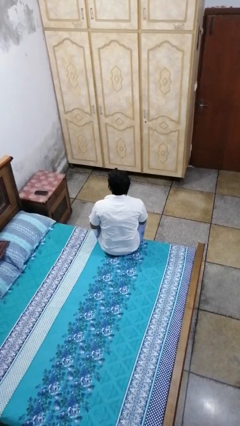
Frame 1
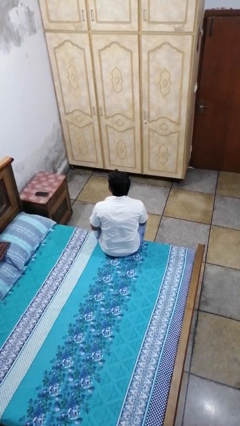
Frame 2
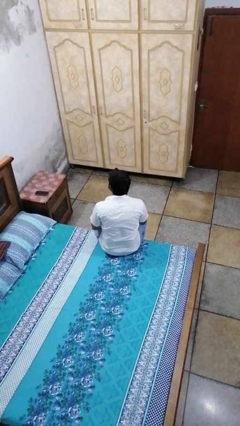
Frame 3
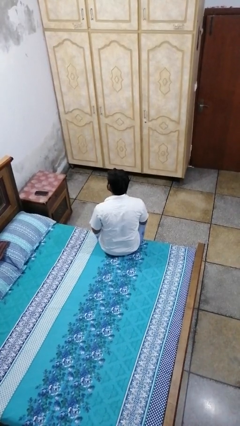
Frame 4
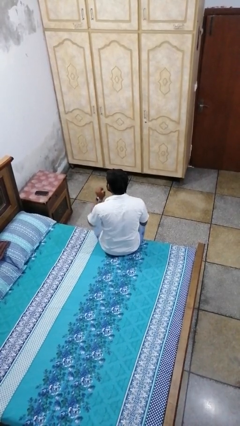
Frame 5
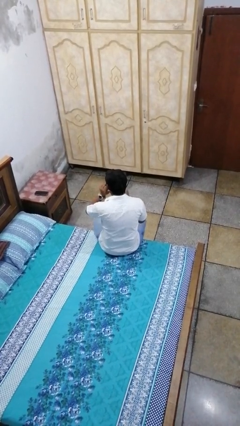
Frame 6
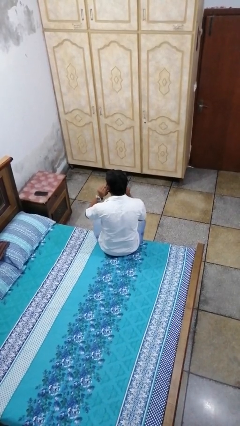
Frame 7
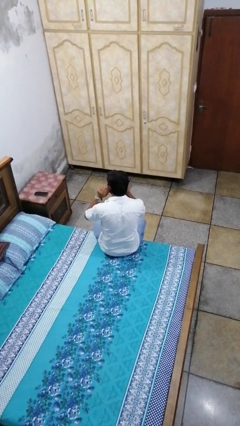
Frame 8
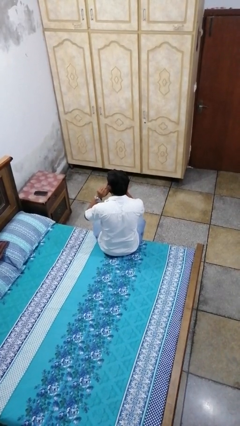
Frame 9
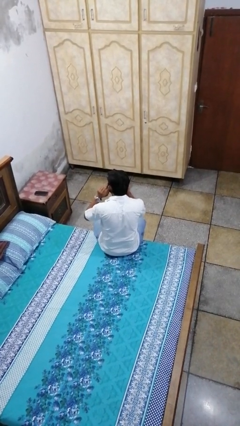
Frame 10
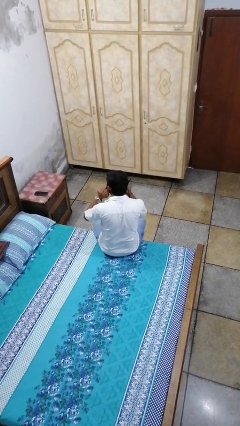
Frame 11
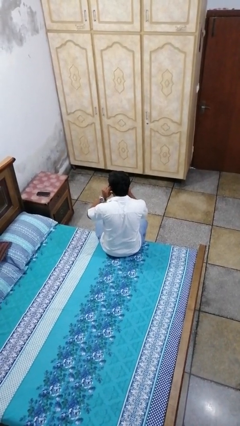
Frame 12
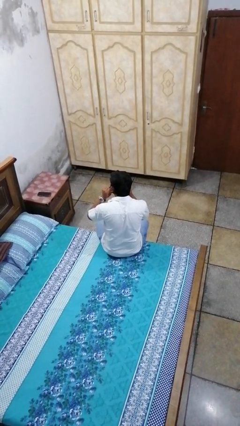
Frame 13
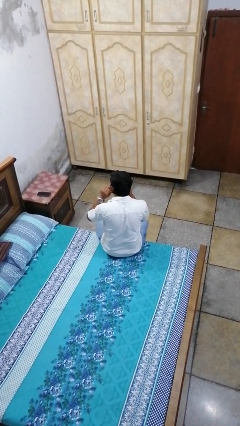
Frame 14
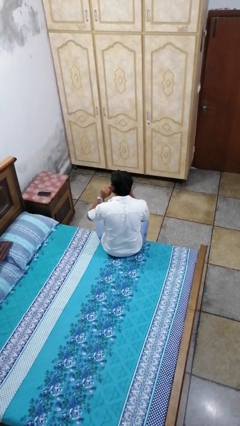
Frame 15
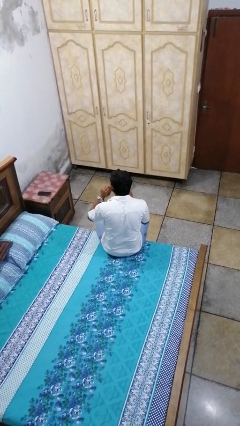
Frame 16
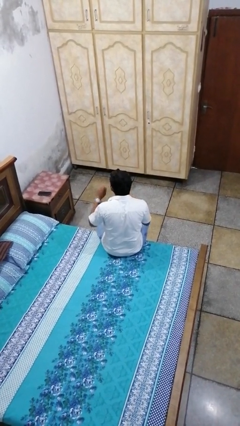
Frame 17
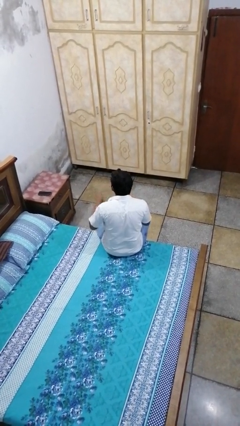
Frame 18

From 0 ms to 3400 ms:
person touches earlobe

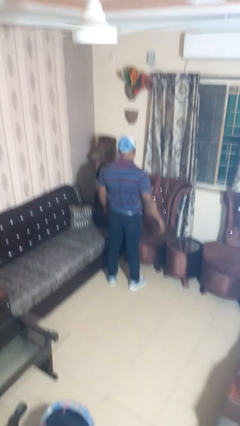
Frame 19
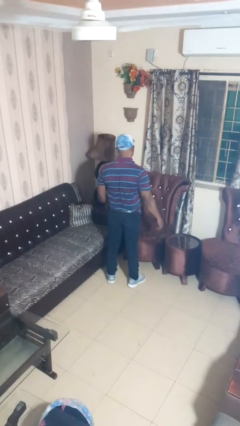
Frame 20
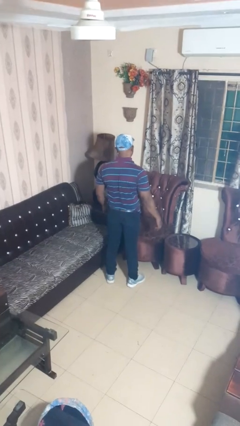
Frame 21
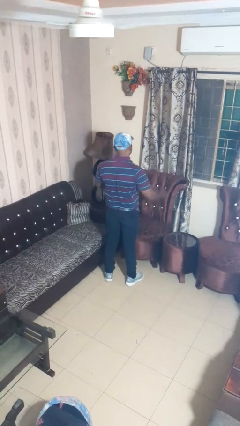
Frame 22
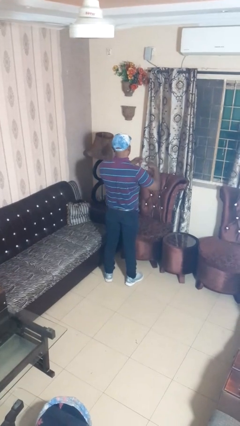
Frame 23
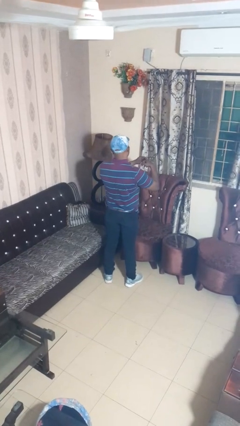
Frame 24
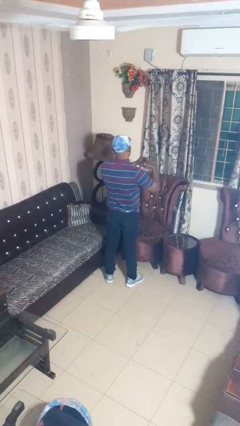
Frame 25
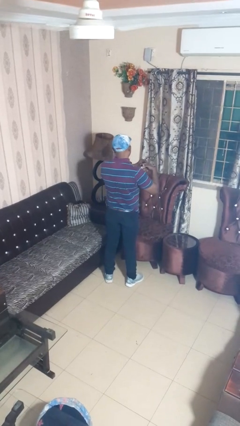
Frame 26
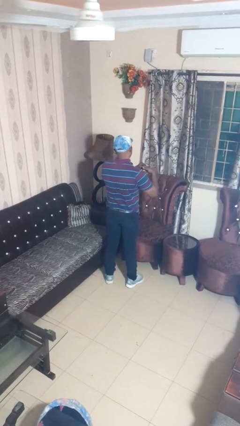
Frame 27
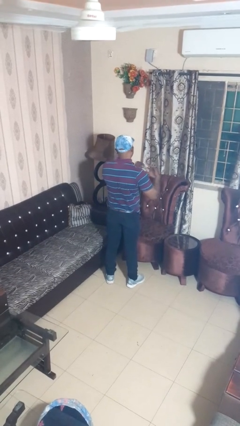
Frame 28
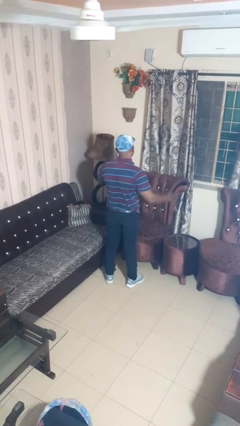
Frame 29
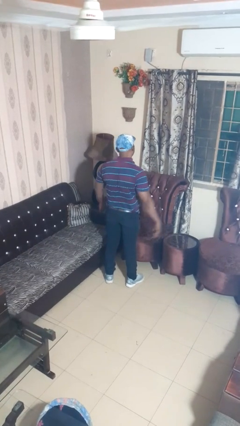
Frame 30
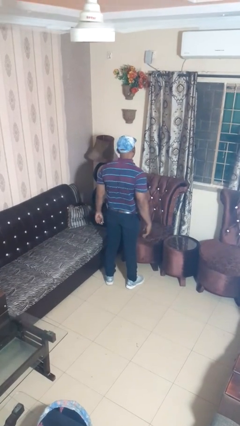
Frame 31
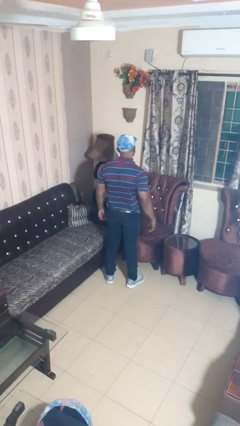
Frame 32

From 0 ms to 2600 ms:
person takes off ring

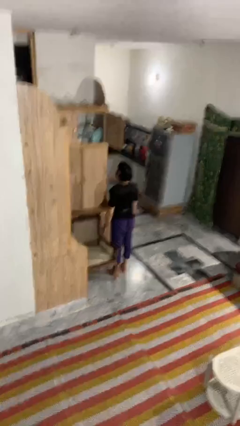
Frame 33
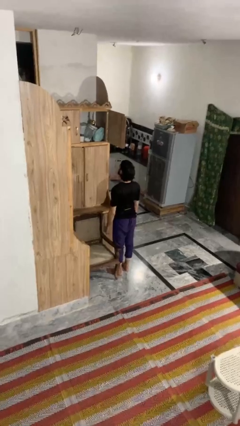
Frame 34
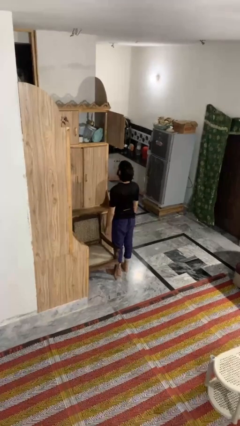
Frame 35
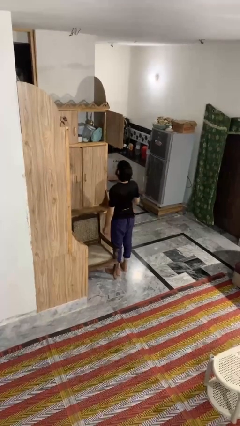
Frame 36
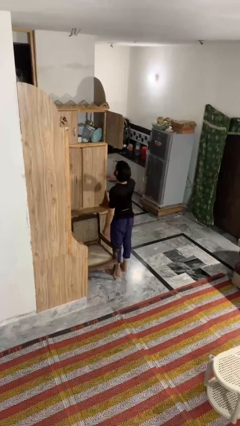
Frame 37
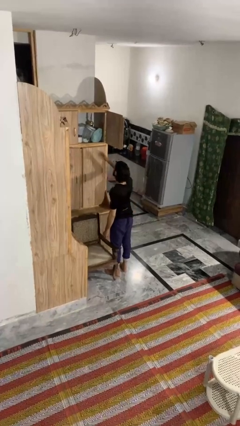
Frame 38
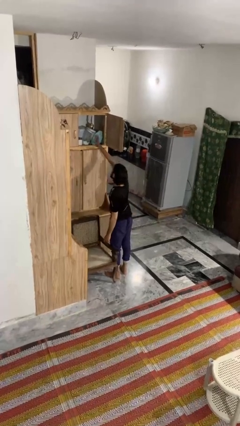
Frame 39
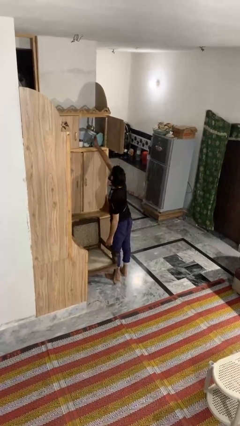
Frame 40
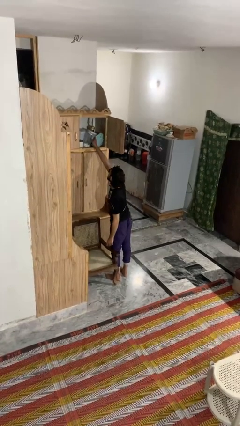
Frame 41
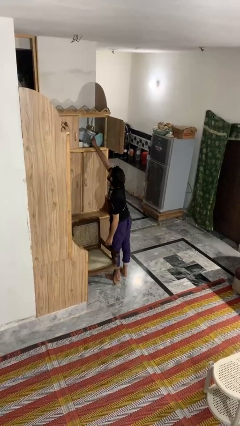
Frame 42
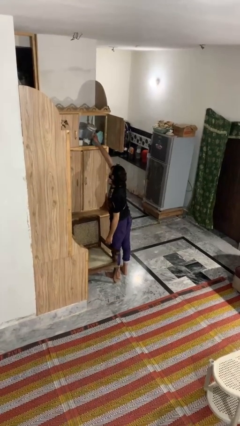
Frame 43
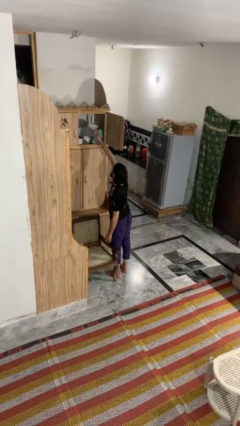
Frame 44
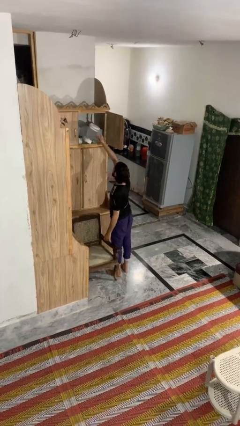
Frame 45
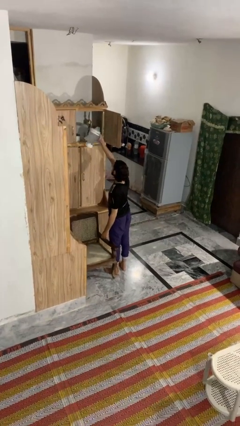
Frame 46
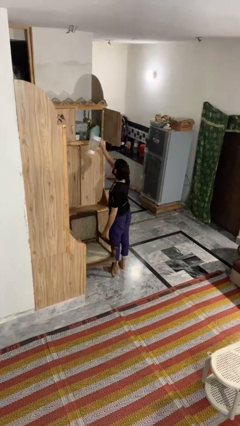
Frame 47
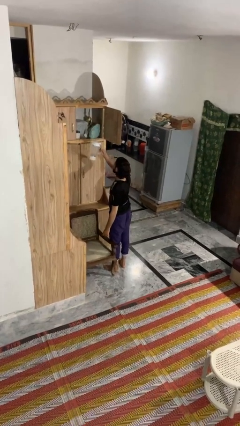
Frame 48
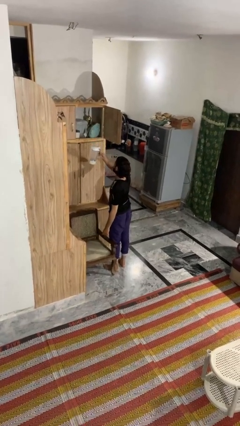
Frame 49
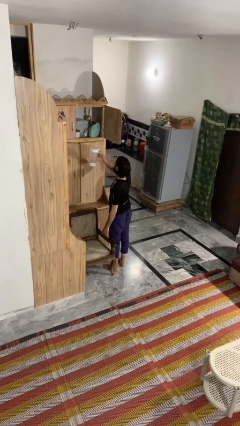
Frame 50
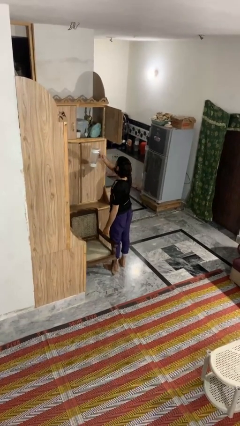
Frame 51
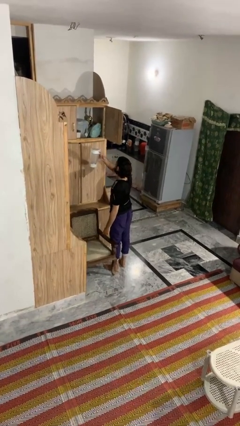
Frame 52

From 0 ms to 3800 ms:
person picks up object from shelf

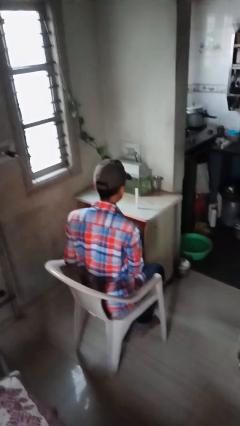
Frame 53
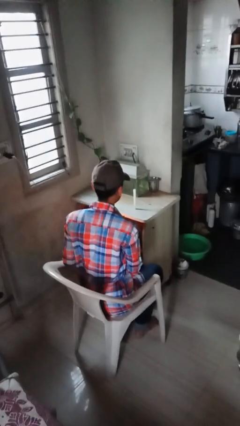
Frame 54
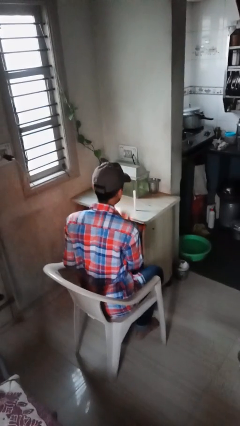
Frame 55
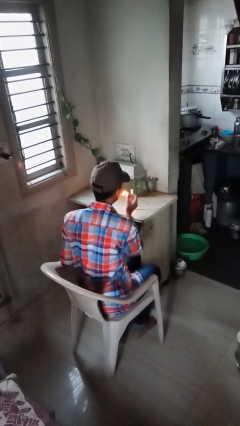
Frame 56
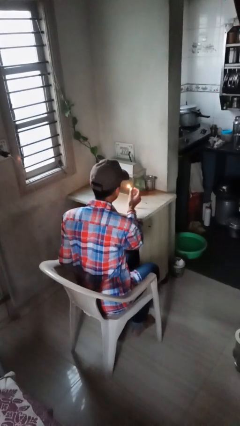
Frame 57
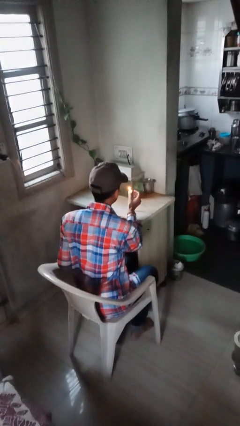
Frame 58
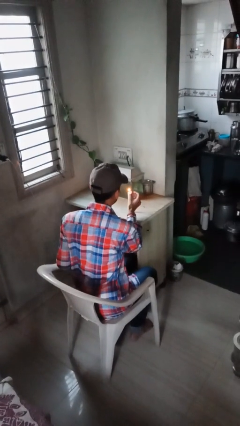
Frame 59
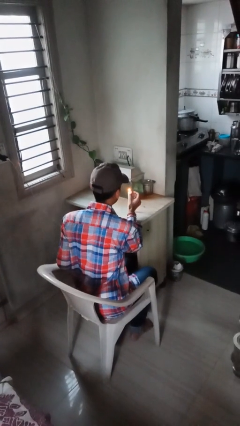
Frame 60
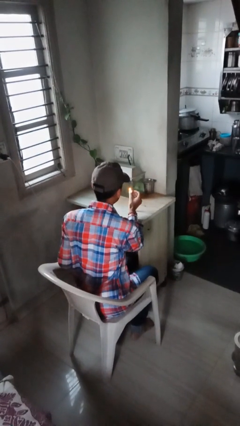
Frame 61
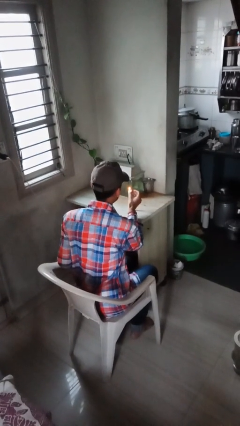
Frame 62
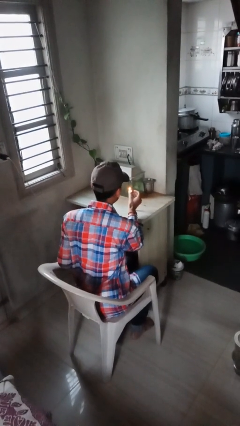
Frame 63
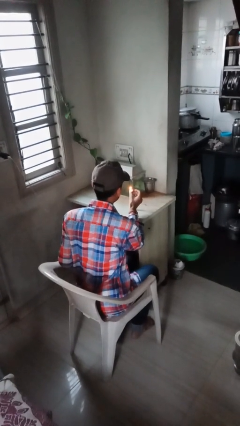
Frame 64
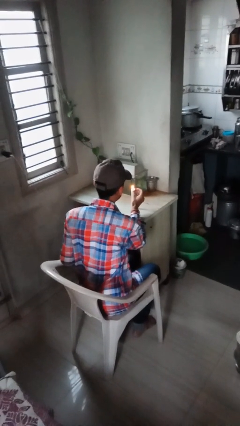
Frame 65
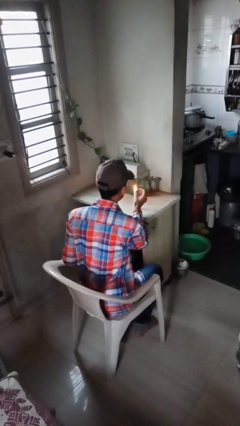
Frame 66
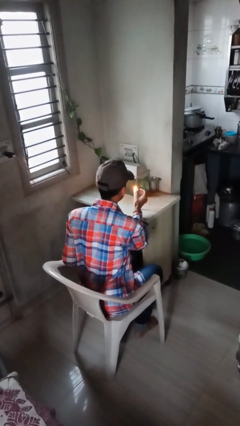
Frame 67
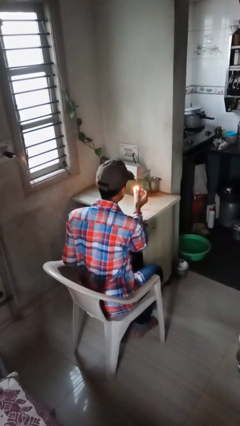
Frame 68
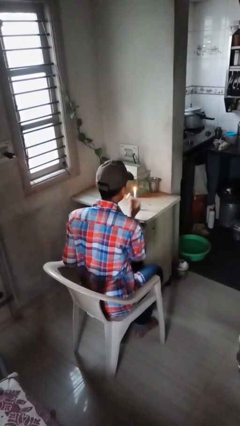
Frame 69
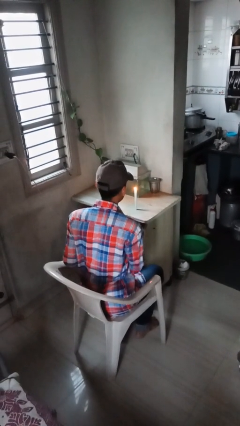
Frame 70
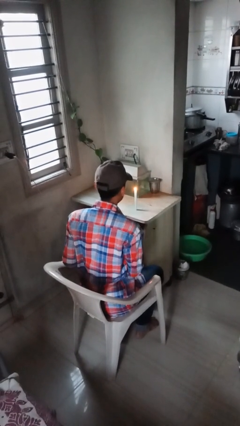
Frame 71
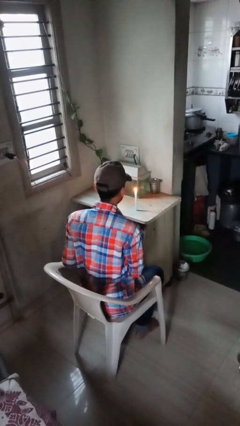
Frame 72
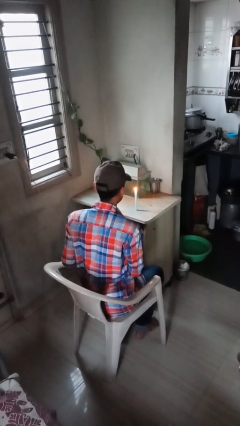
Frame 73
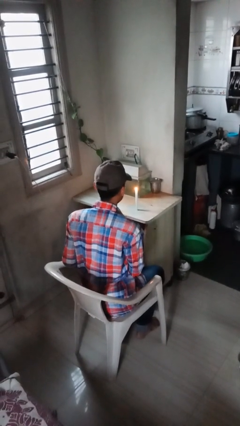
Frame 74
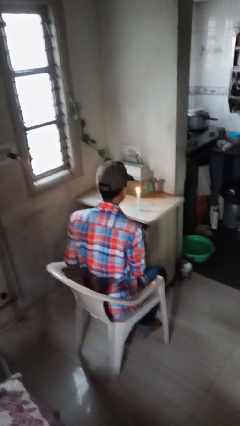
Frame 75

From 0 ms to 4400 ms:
person lights candle

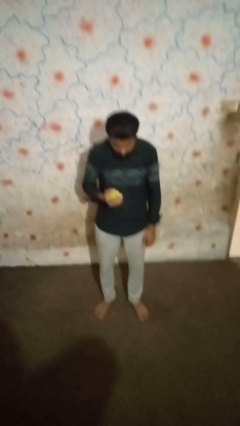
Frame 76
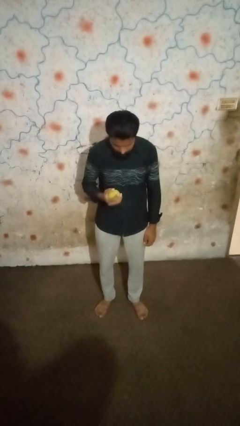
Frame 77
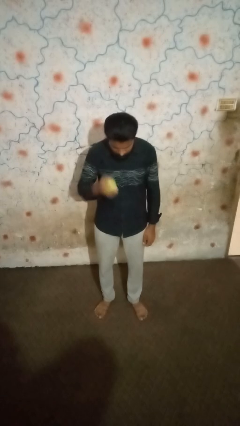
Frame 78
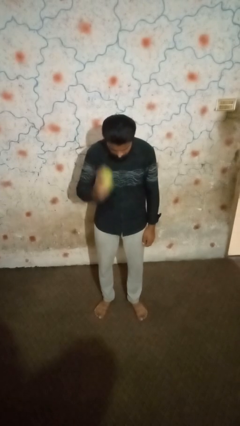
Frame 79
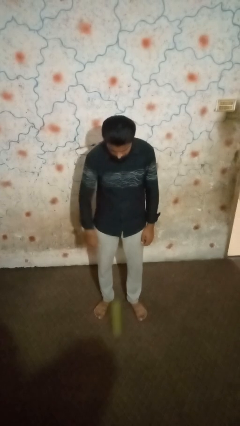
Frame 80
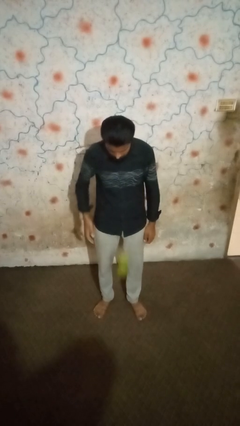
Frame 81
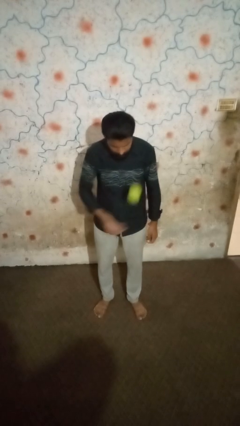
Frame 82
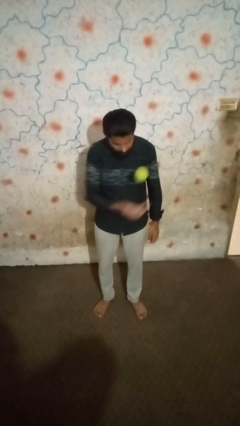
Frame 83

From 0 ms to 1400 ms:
person bounces ball on floor

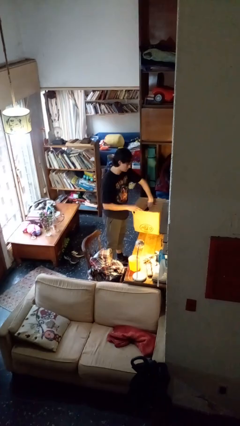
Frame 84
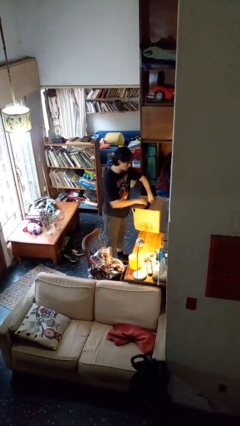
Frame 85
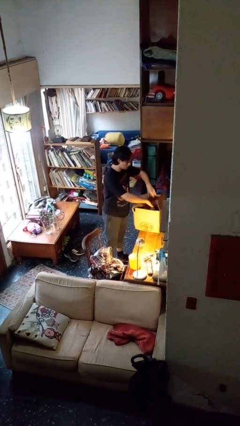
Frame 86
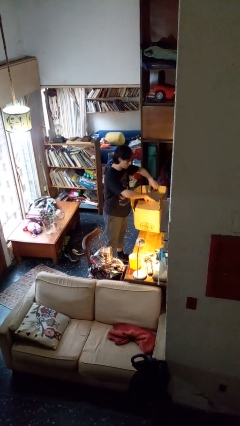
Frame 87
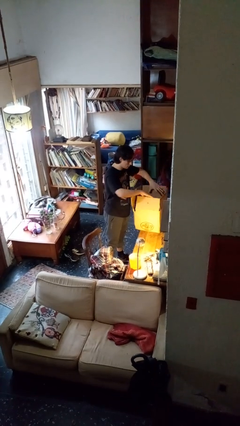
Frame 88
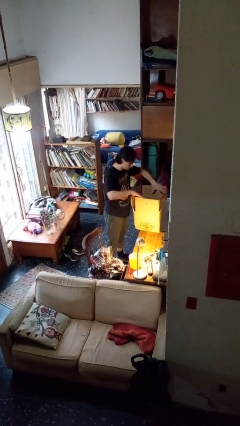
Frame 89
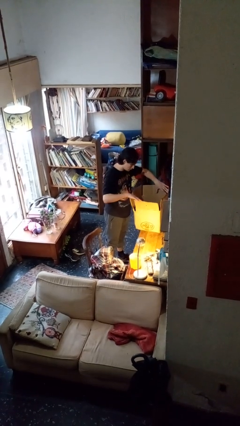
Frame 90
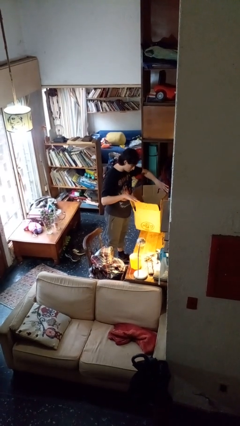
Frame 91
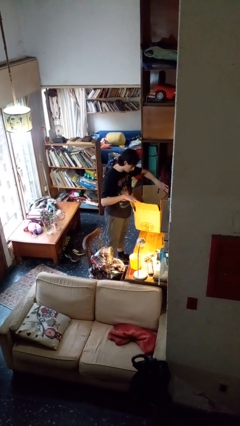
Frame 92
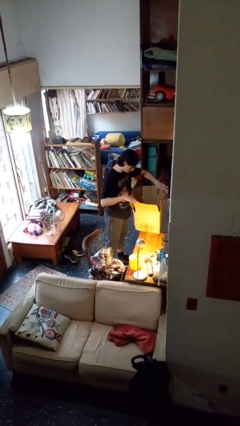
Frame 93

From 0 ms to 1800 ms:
person opens box
